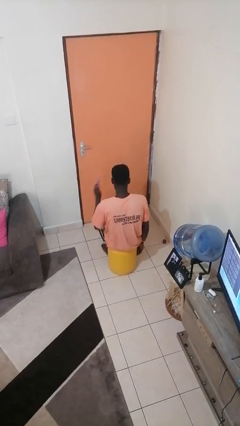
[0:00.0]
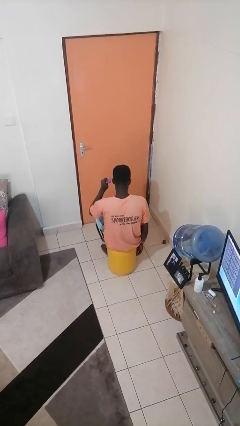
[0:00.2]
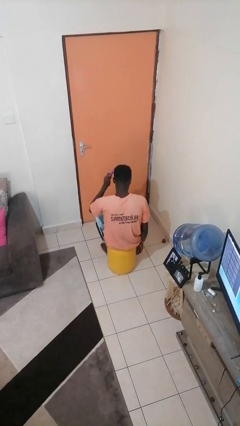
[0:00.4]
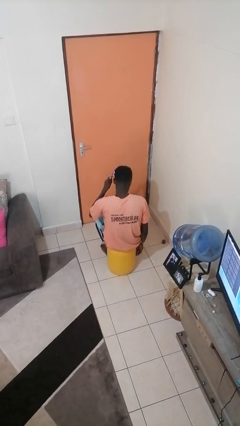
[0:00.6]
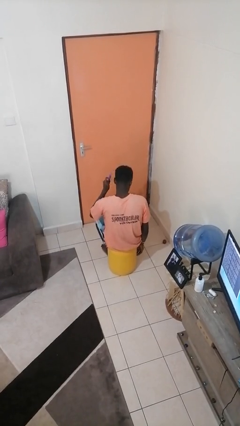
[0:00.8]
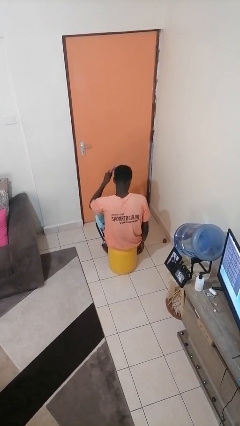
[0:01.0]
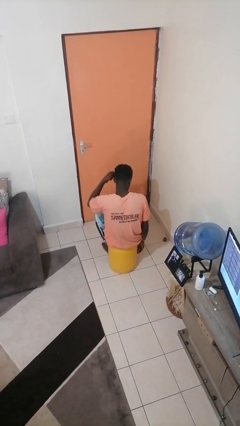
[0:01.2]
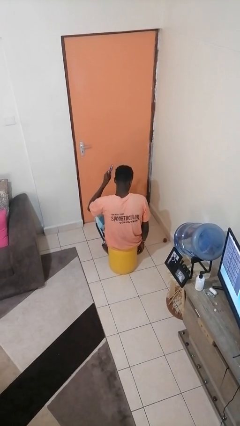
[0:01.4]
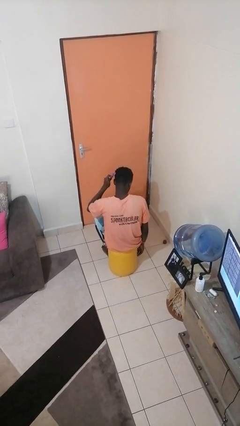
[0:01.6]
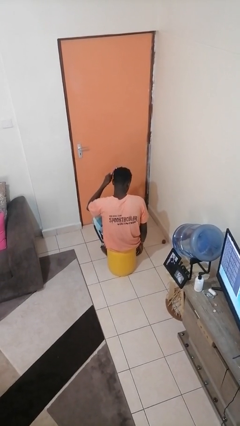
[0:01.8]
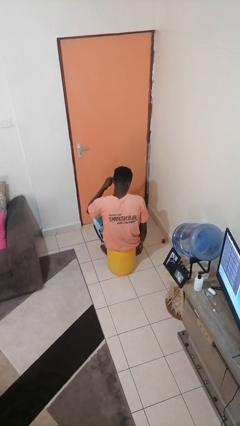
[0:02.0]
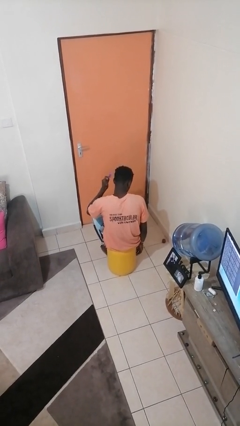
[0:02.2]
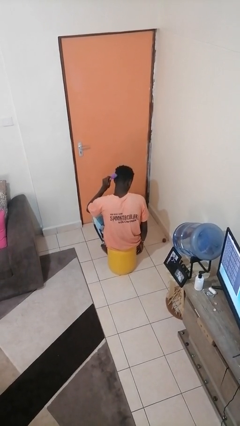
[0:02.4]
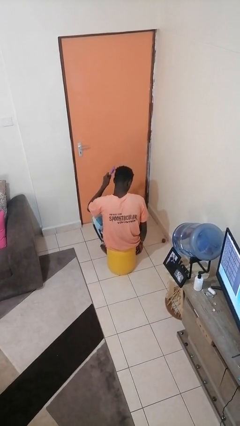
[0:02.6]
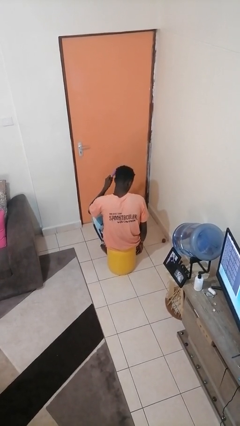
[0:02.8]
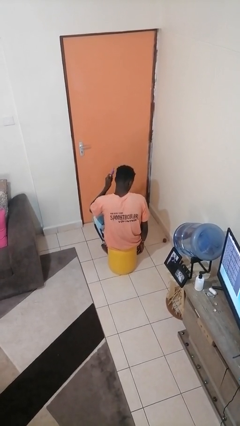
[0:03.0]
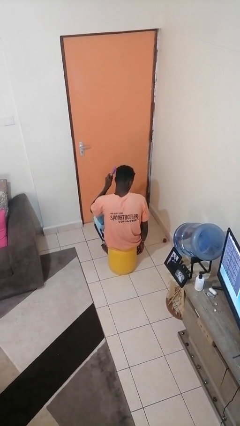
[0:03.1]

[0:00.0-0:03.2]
person brushes hair

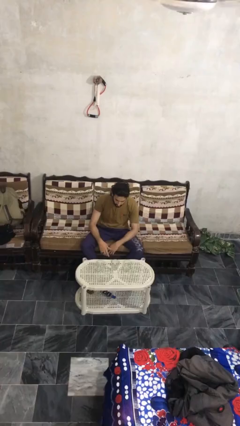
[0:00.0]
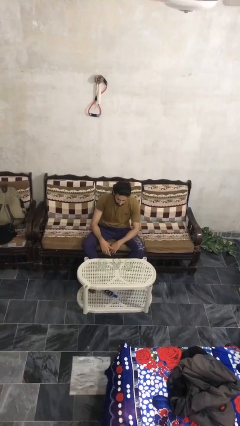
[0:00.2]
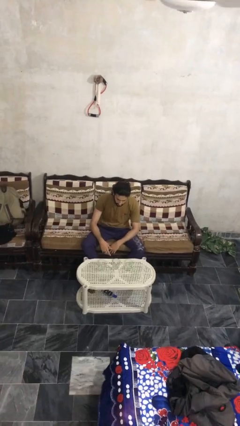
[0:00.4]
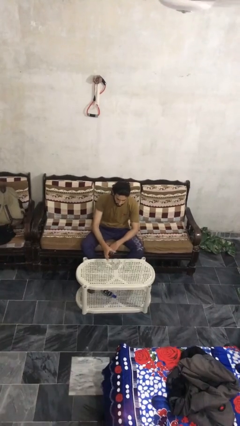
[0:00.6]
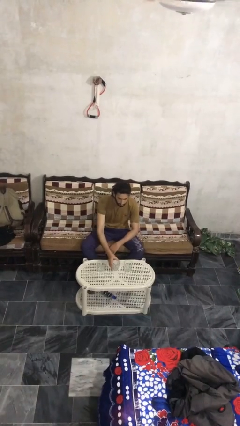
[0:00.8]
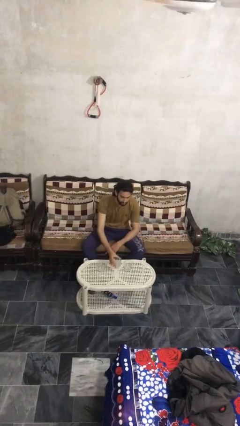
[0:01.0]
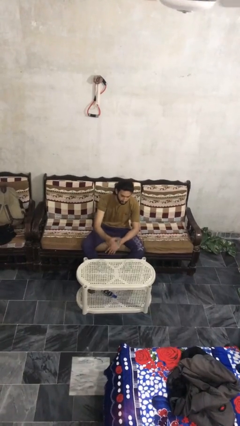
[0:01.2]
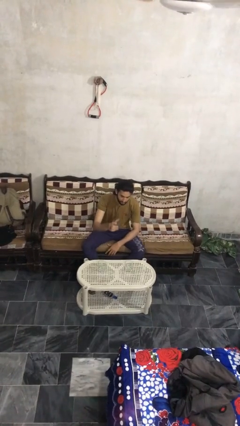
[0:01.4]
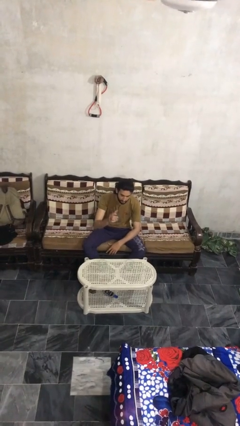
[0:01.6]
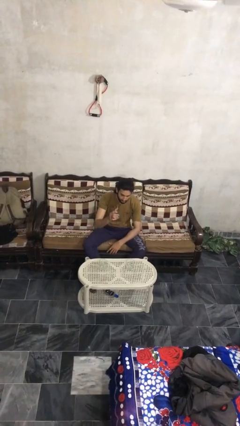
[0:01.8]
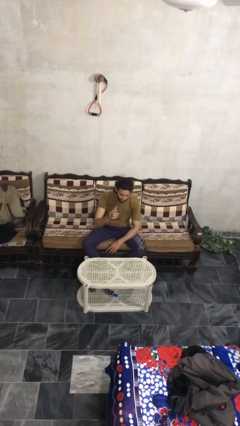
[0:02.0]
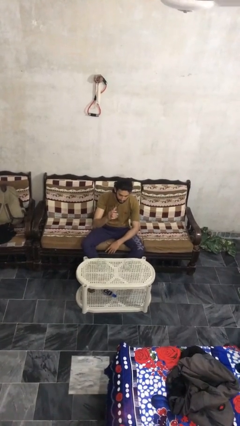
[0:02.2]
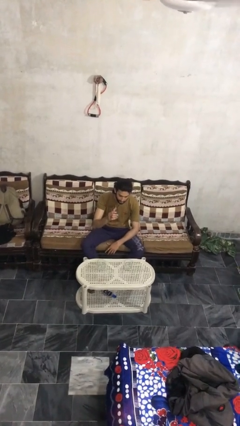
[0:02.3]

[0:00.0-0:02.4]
person picks up object from table

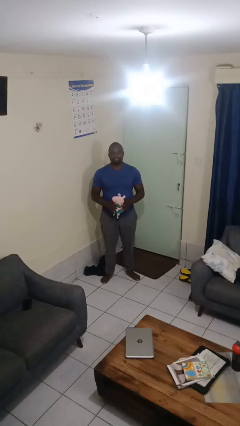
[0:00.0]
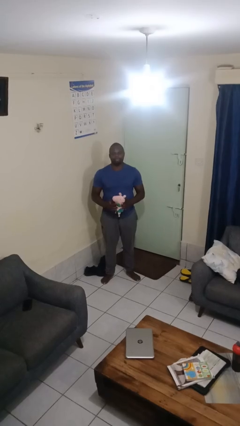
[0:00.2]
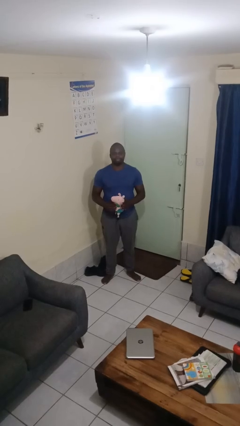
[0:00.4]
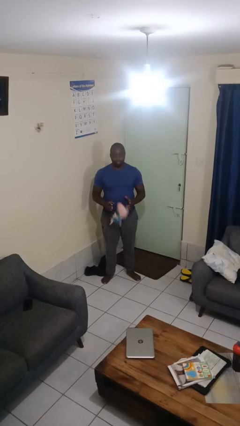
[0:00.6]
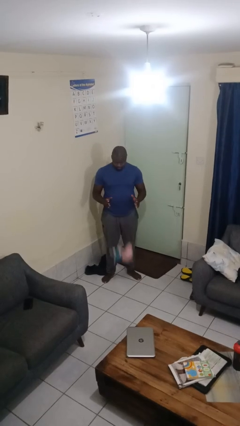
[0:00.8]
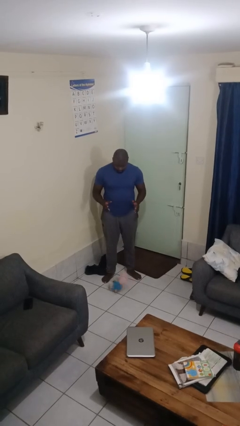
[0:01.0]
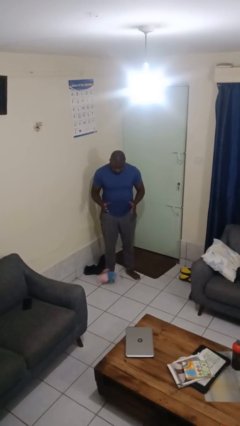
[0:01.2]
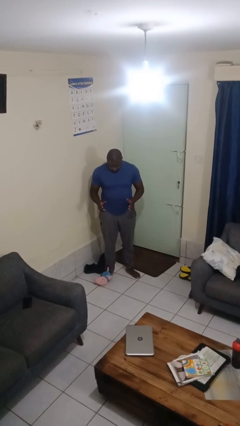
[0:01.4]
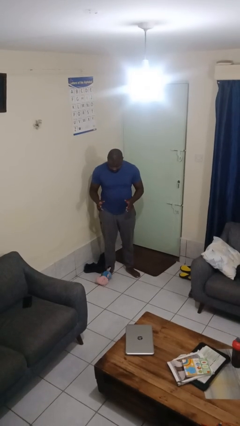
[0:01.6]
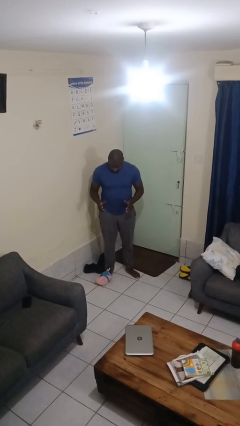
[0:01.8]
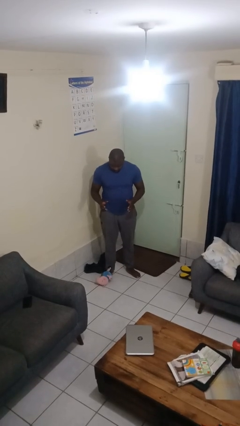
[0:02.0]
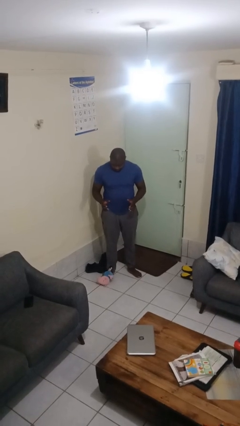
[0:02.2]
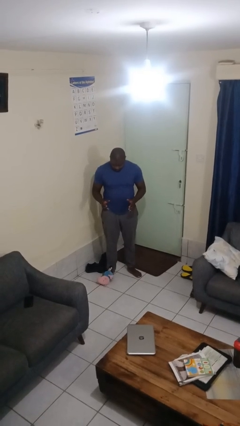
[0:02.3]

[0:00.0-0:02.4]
person drops object

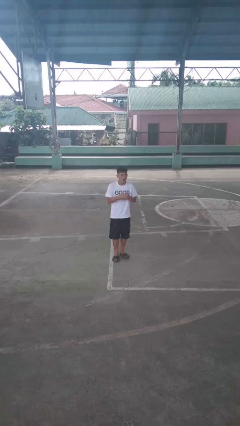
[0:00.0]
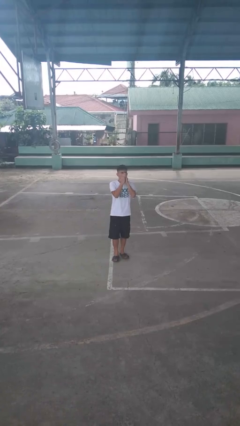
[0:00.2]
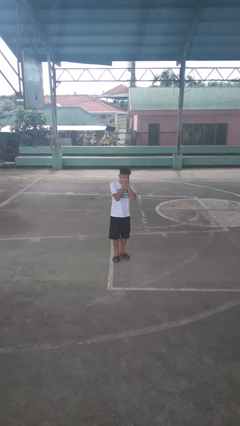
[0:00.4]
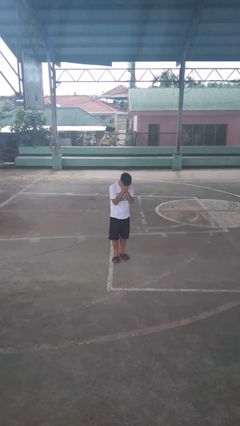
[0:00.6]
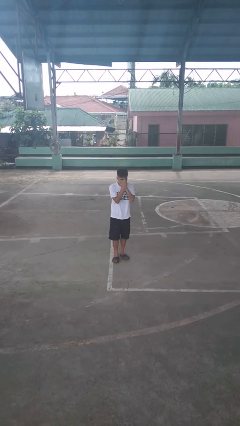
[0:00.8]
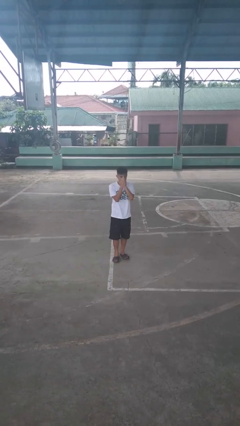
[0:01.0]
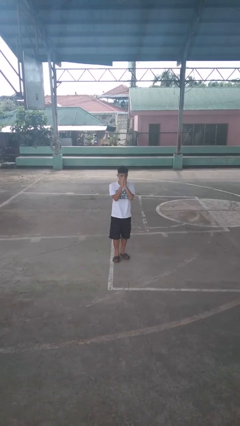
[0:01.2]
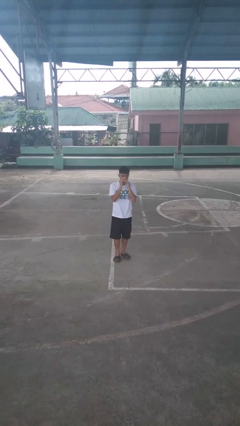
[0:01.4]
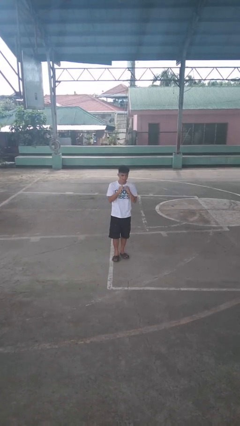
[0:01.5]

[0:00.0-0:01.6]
person sneezes into hand

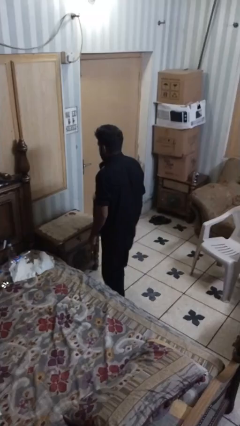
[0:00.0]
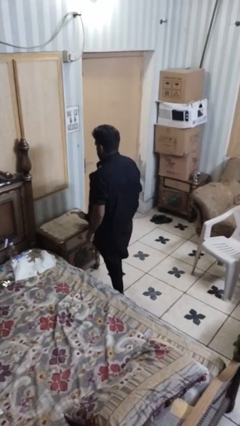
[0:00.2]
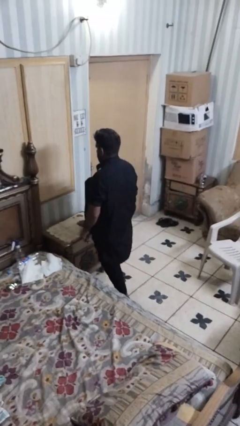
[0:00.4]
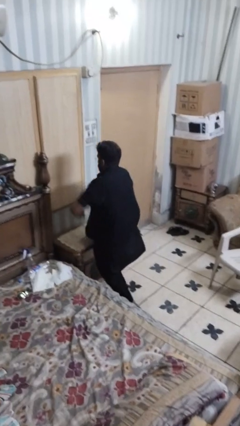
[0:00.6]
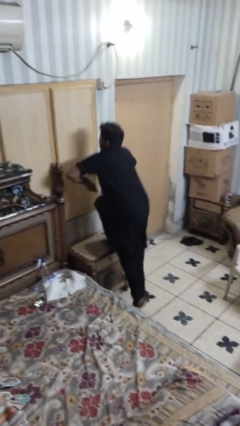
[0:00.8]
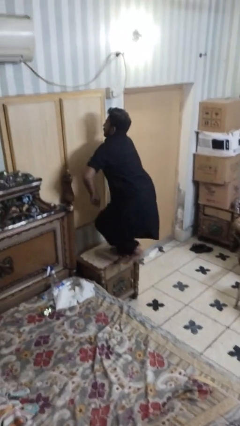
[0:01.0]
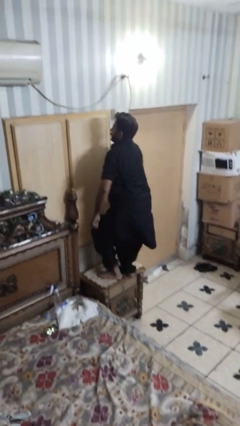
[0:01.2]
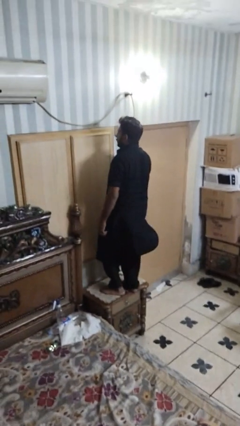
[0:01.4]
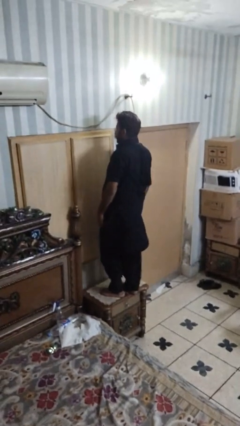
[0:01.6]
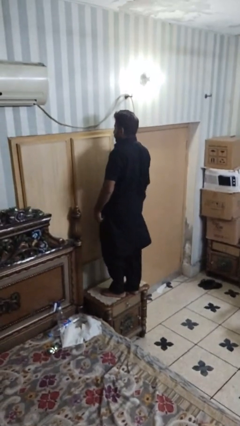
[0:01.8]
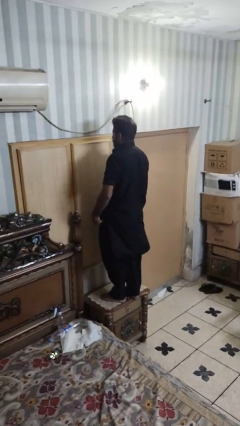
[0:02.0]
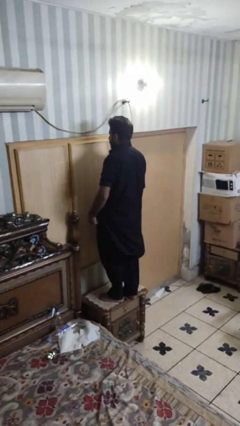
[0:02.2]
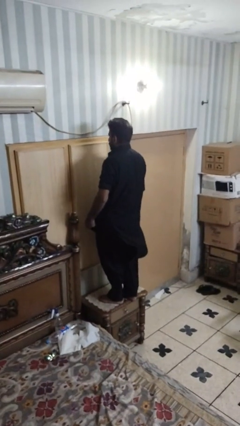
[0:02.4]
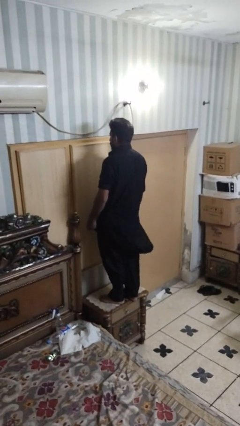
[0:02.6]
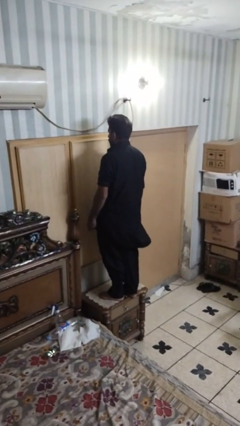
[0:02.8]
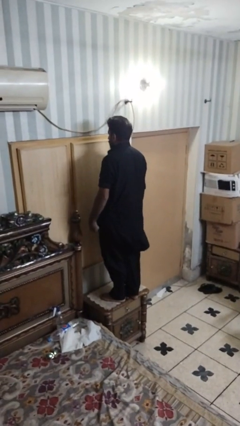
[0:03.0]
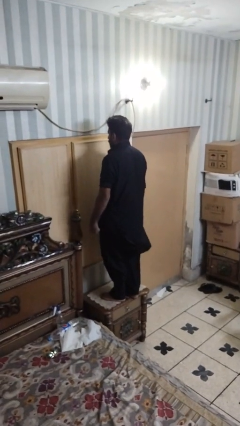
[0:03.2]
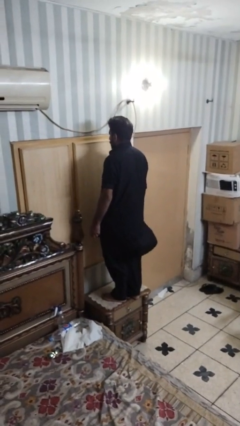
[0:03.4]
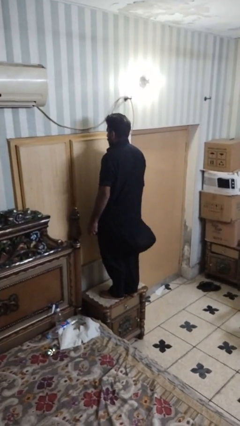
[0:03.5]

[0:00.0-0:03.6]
person climbs on table

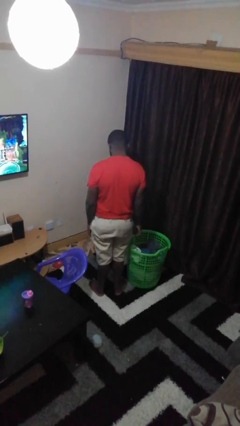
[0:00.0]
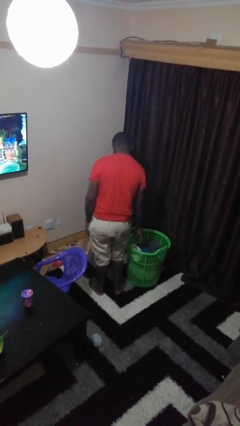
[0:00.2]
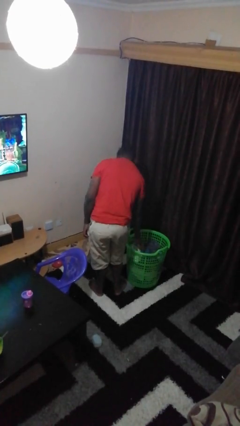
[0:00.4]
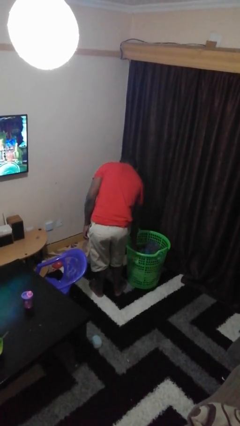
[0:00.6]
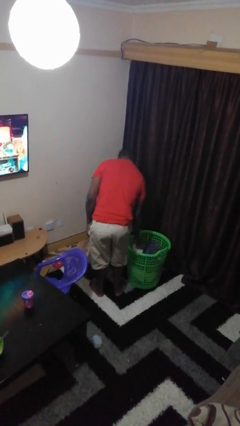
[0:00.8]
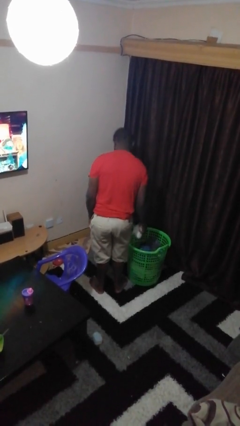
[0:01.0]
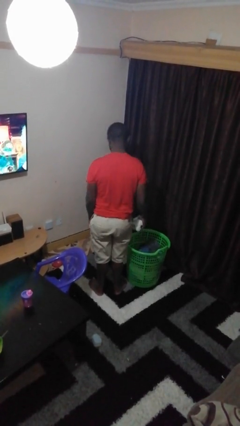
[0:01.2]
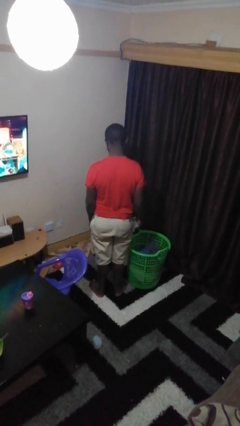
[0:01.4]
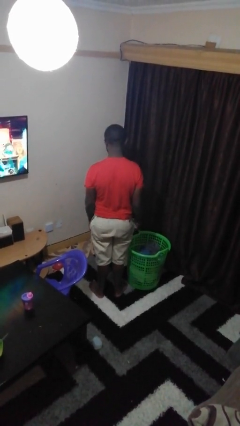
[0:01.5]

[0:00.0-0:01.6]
person takes object from basket

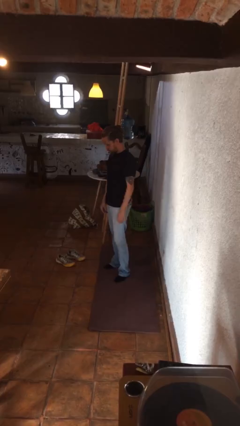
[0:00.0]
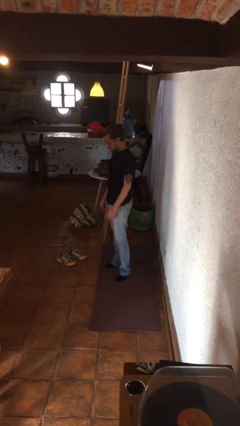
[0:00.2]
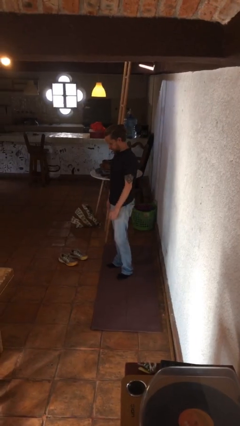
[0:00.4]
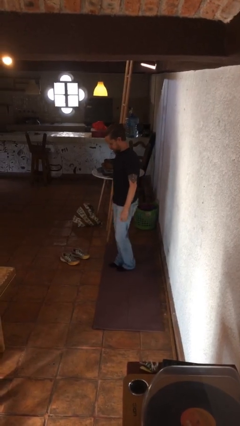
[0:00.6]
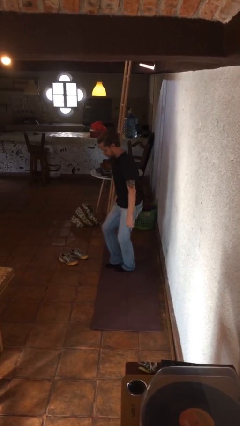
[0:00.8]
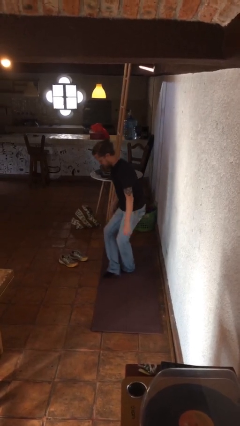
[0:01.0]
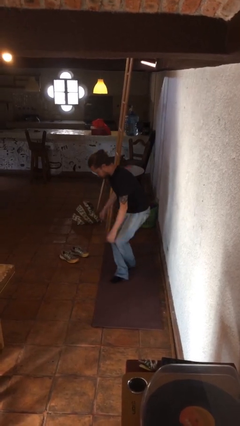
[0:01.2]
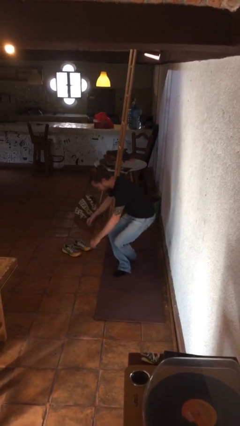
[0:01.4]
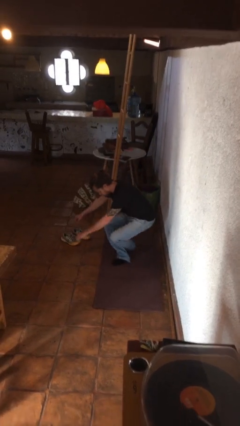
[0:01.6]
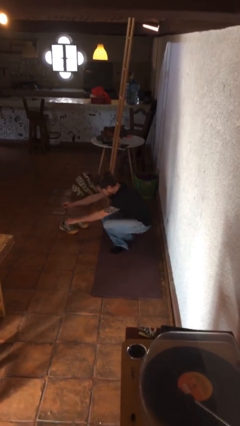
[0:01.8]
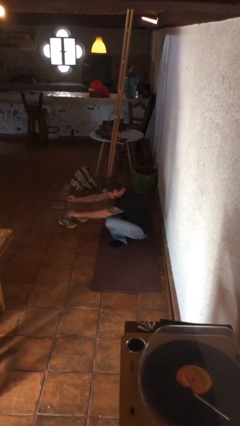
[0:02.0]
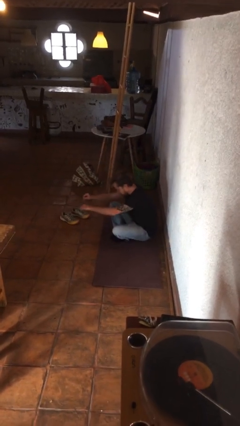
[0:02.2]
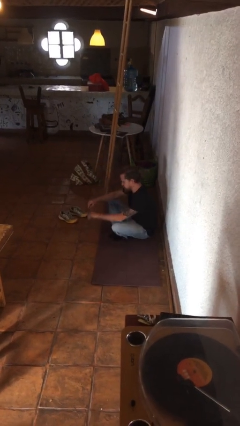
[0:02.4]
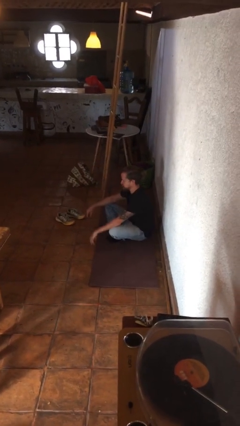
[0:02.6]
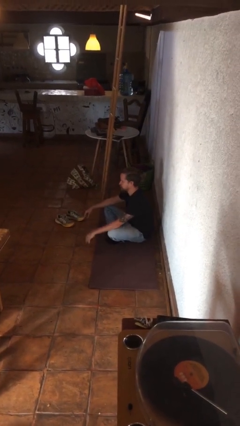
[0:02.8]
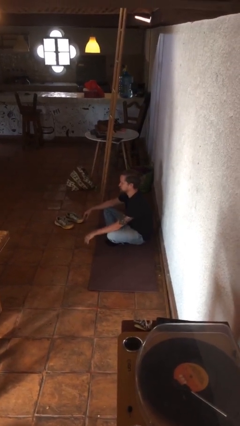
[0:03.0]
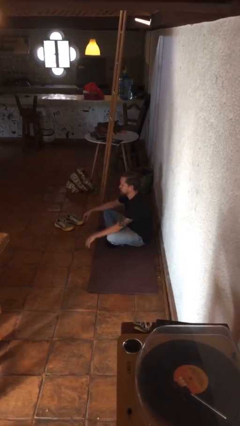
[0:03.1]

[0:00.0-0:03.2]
person sits crisscross
